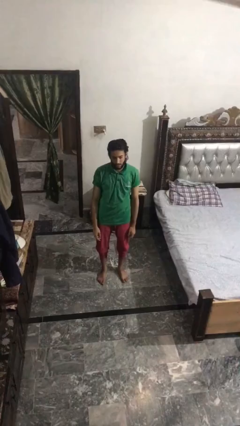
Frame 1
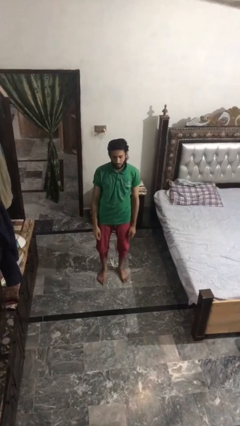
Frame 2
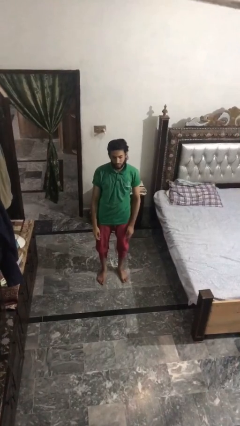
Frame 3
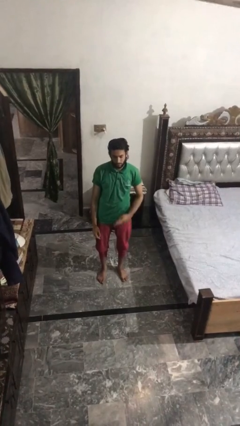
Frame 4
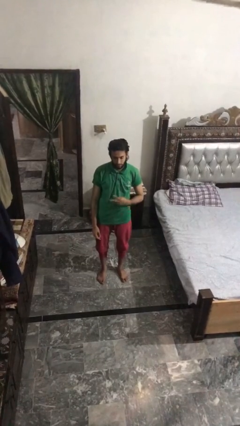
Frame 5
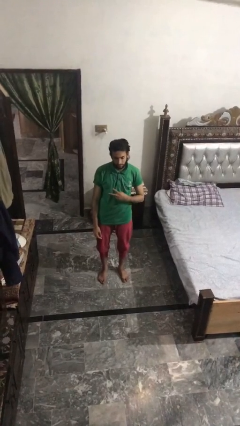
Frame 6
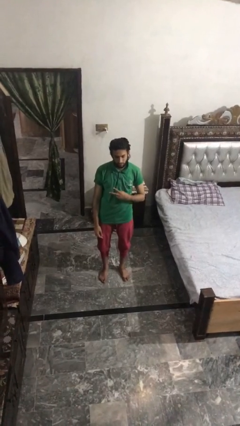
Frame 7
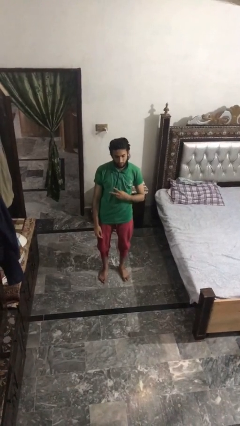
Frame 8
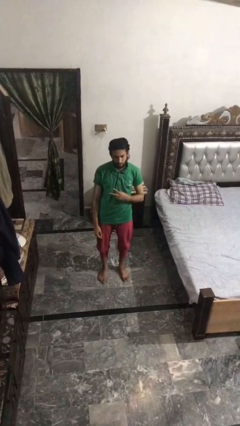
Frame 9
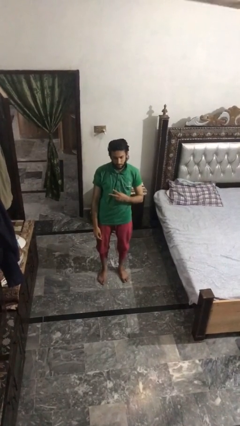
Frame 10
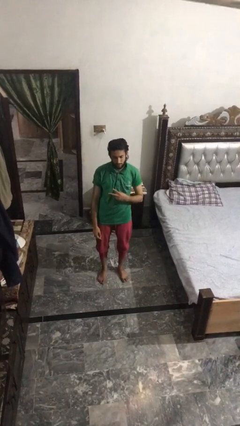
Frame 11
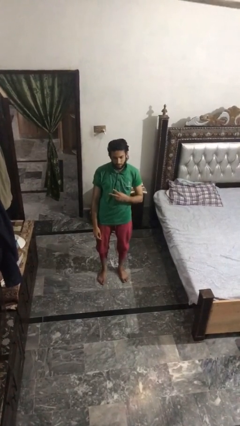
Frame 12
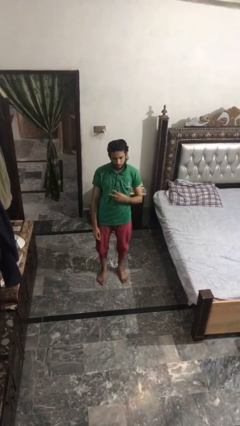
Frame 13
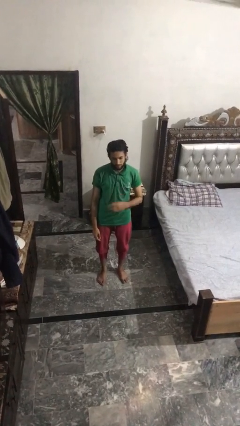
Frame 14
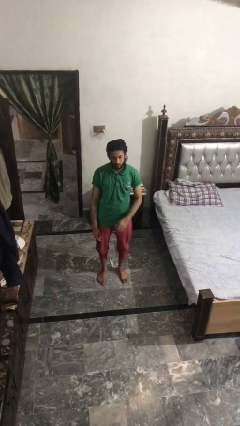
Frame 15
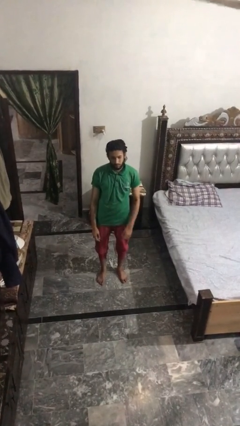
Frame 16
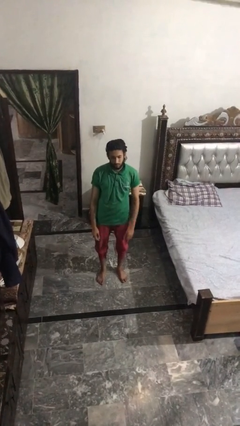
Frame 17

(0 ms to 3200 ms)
person gestures peace

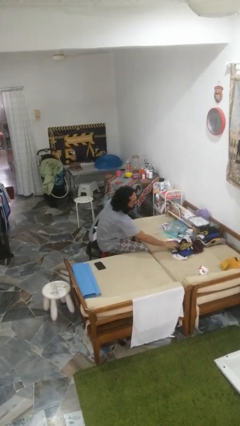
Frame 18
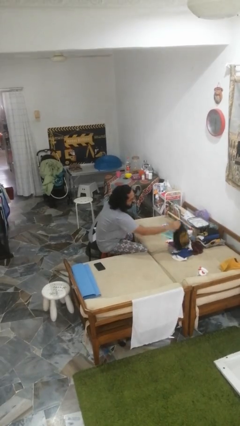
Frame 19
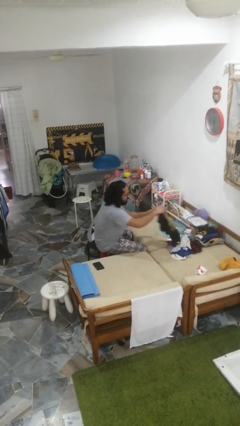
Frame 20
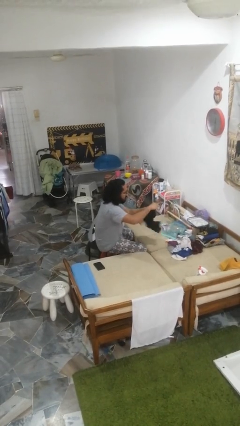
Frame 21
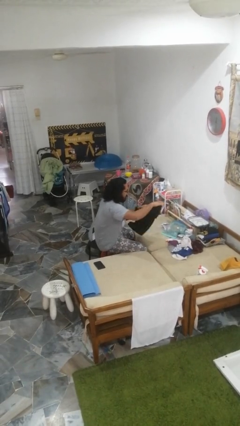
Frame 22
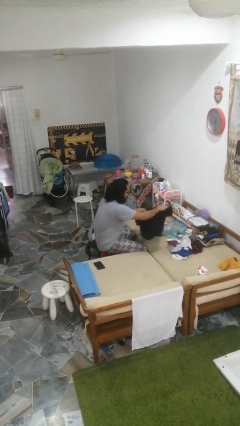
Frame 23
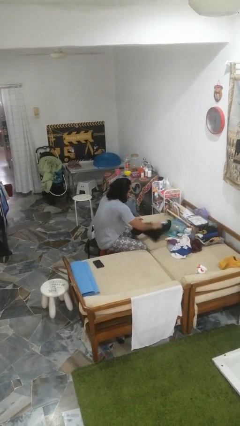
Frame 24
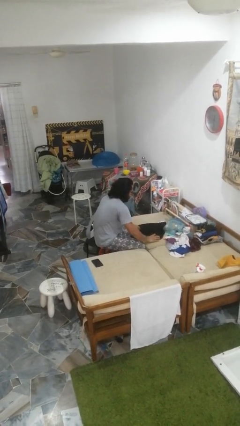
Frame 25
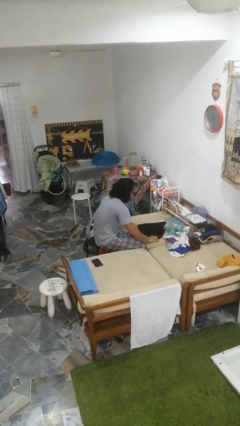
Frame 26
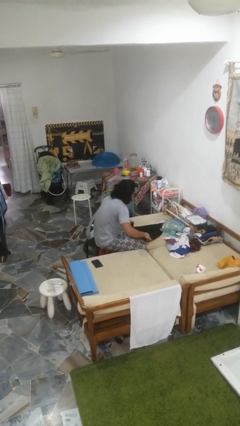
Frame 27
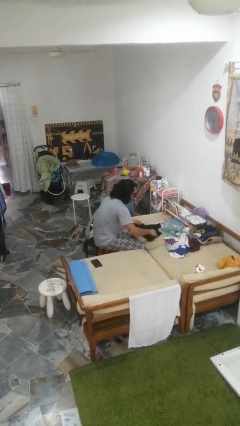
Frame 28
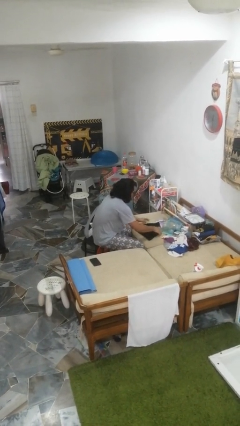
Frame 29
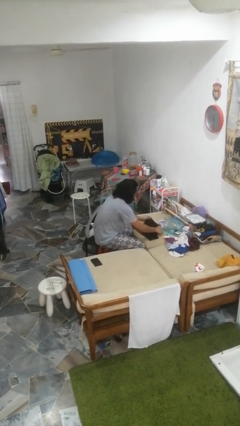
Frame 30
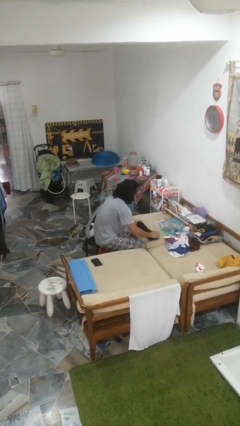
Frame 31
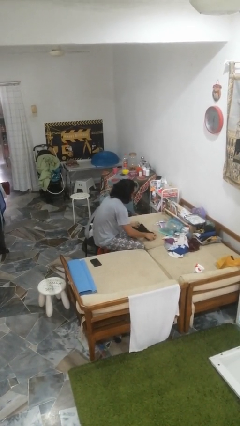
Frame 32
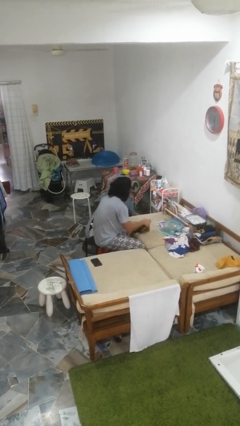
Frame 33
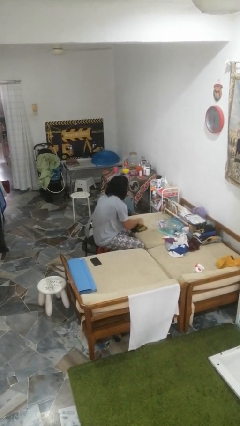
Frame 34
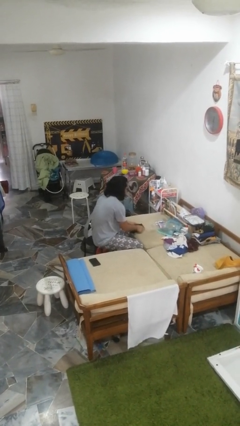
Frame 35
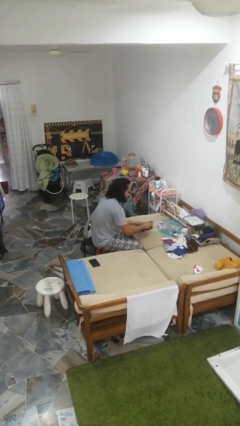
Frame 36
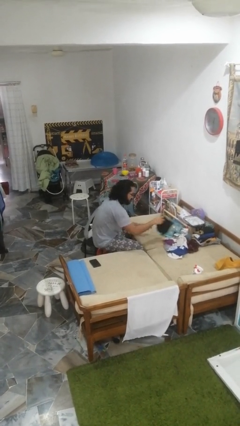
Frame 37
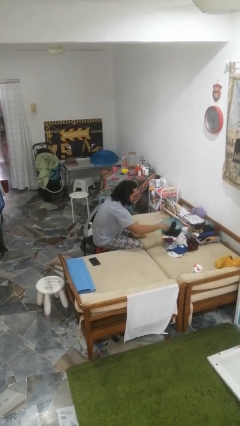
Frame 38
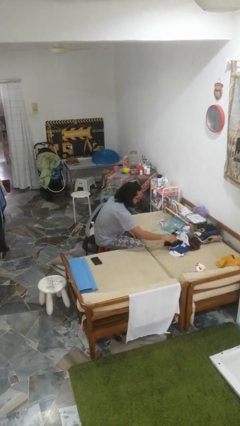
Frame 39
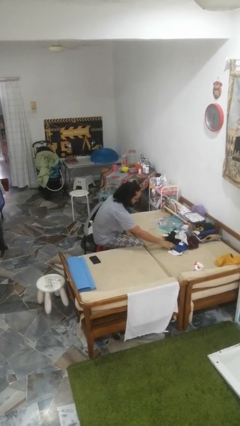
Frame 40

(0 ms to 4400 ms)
person folds shirt

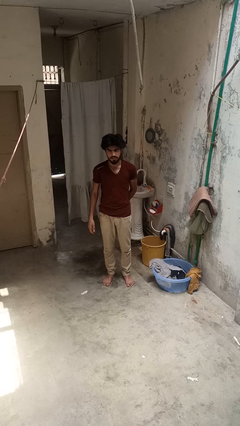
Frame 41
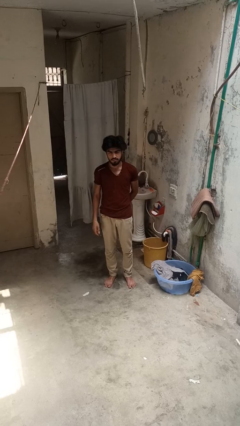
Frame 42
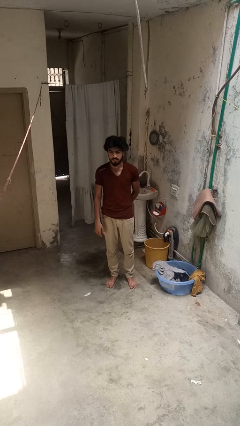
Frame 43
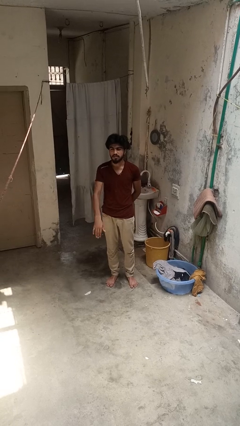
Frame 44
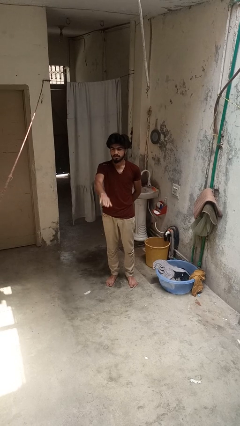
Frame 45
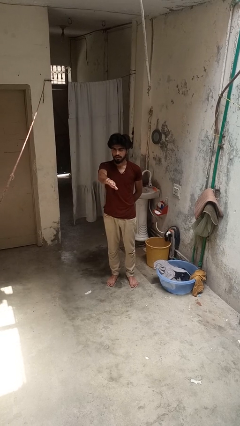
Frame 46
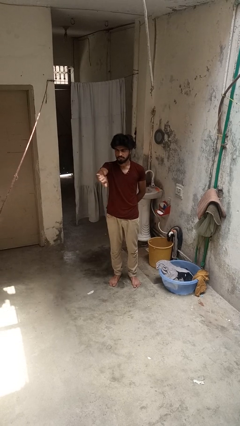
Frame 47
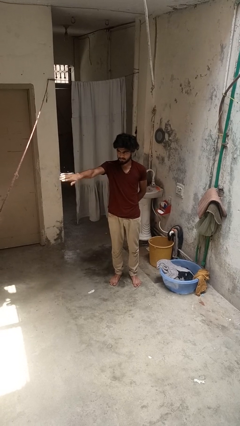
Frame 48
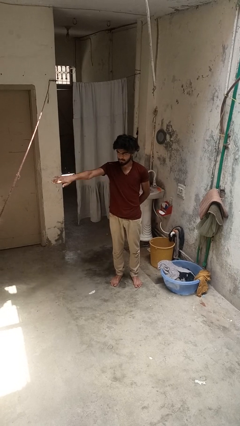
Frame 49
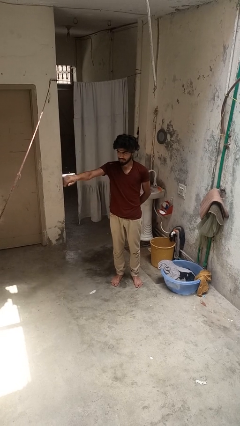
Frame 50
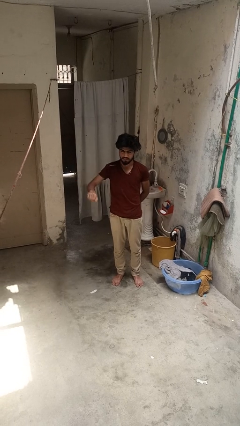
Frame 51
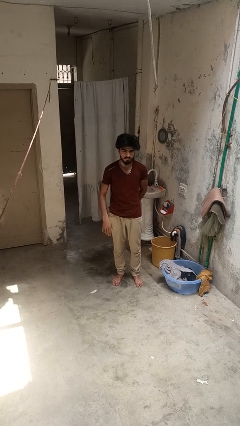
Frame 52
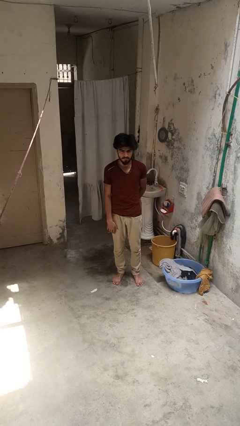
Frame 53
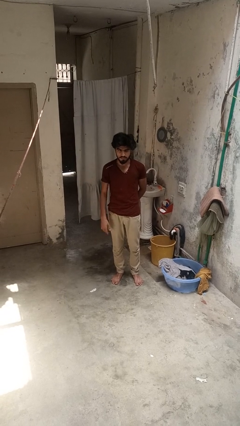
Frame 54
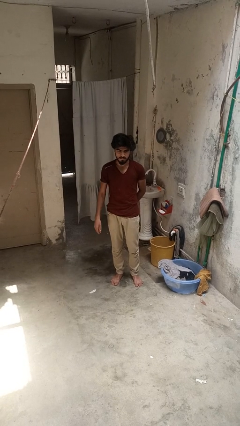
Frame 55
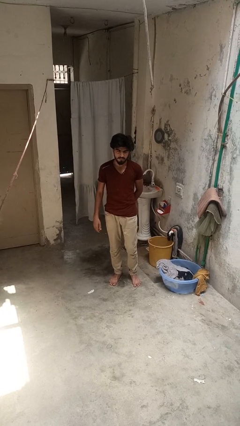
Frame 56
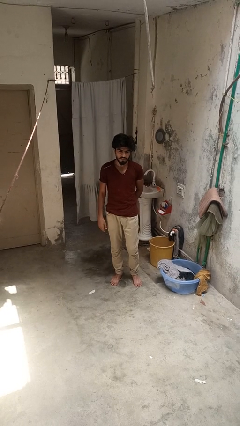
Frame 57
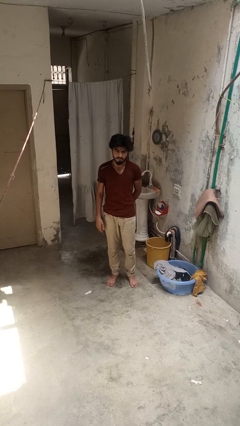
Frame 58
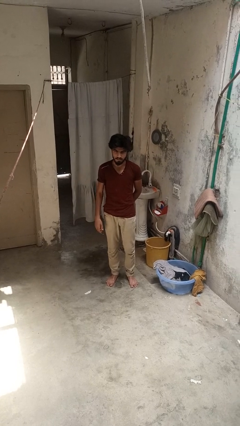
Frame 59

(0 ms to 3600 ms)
person gestures swipe right

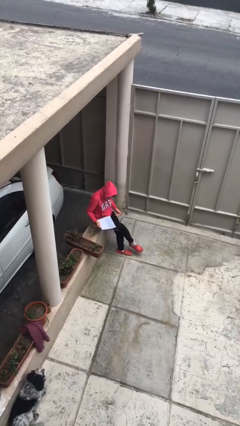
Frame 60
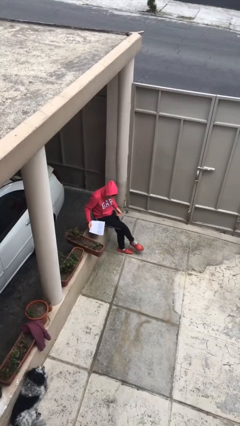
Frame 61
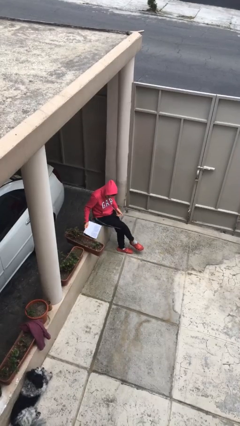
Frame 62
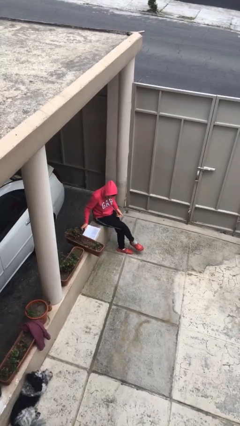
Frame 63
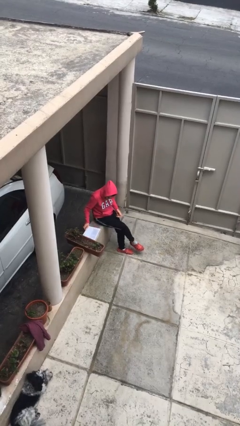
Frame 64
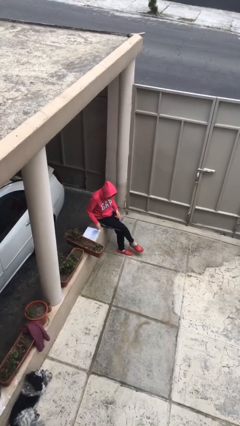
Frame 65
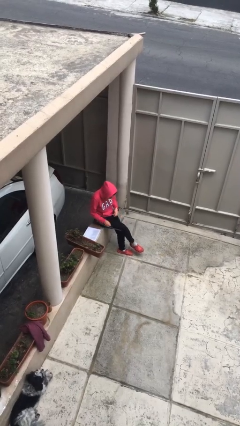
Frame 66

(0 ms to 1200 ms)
person puts down object on table

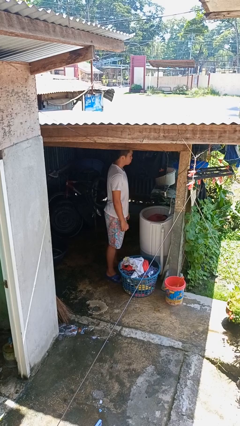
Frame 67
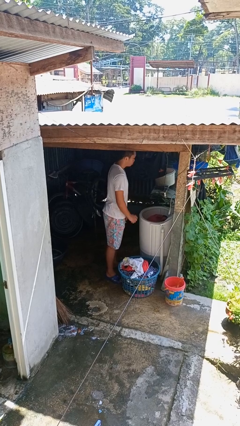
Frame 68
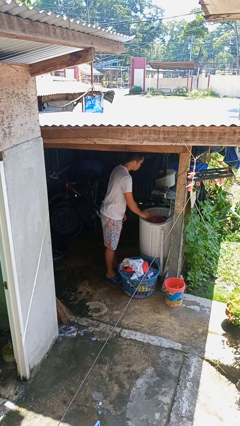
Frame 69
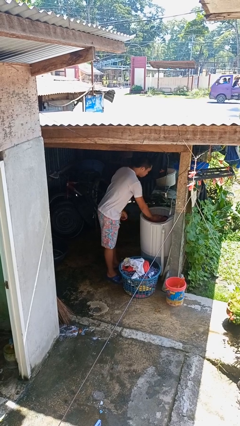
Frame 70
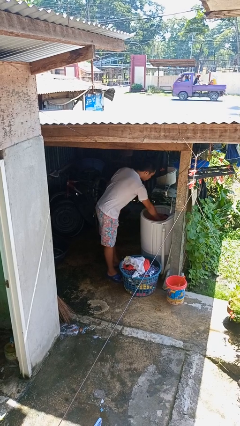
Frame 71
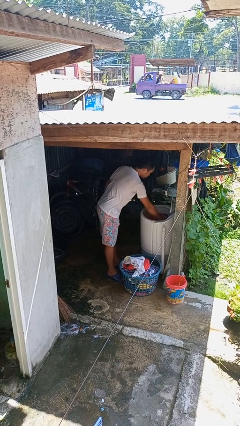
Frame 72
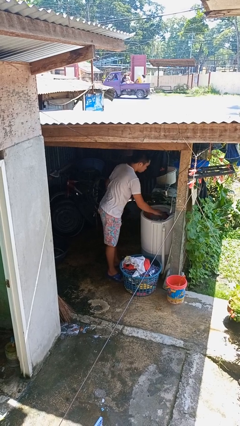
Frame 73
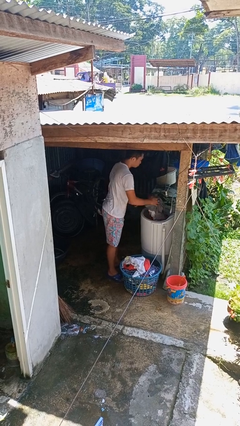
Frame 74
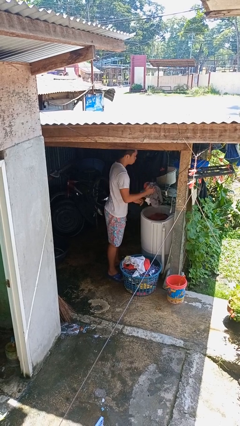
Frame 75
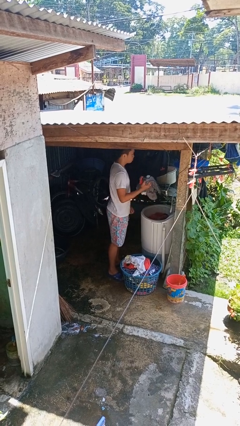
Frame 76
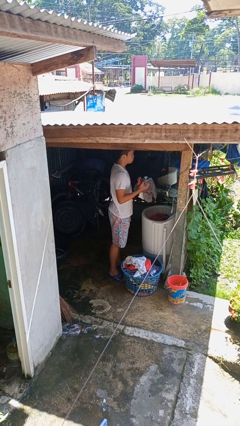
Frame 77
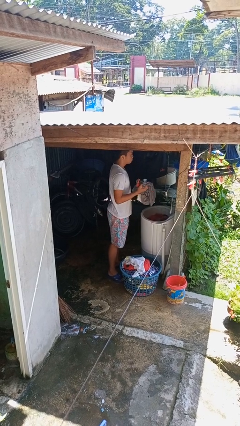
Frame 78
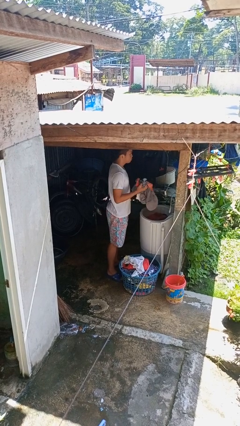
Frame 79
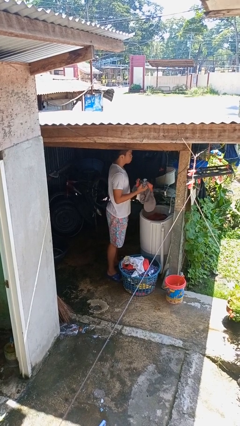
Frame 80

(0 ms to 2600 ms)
person unloads clotheswasher

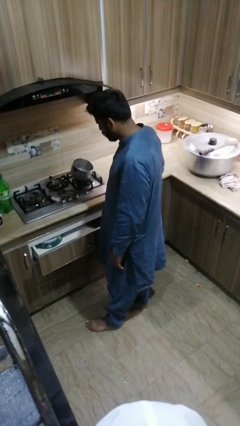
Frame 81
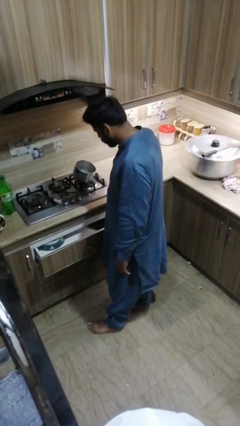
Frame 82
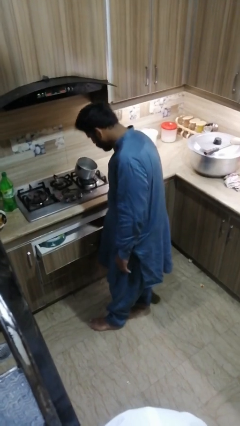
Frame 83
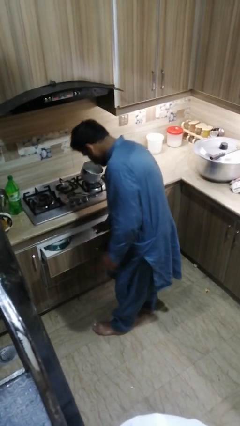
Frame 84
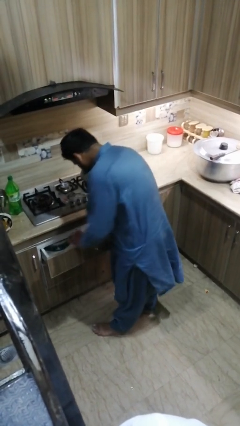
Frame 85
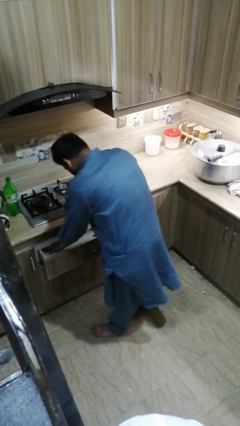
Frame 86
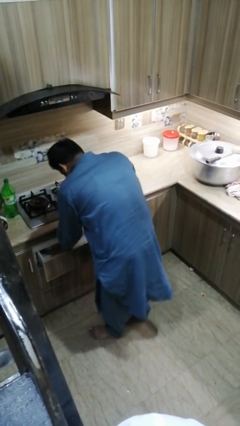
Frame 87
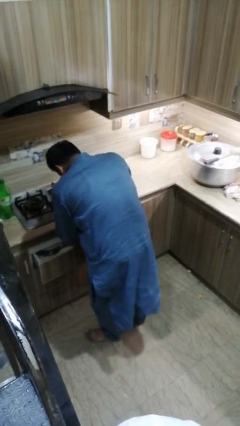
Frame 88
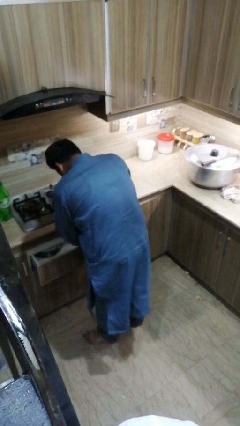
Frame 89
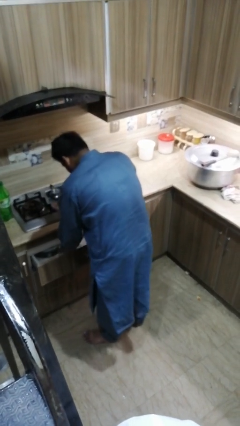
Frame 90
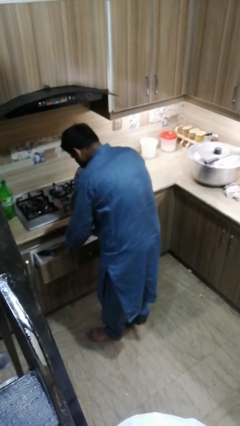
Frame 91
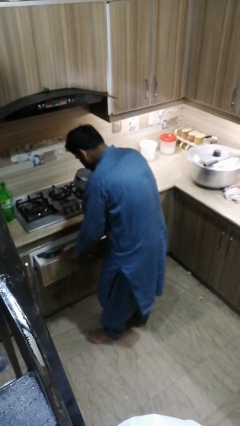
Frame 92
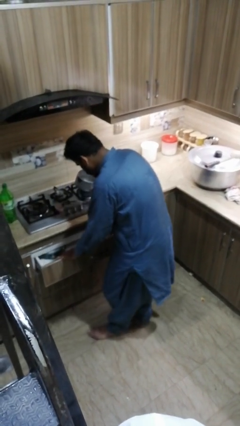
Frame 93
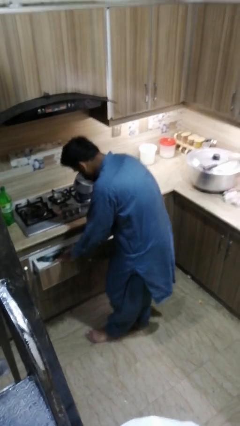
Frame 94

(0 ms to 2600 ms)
person searches in kitchen drawer
